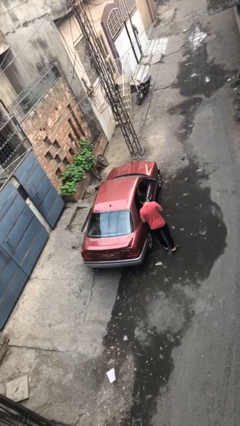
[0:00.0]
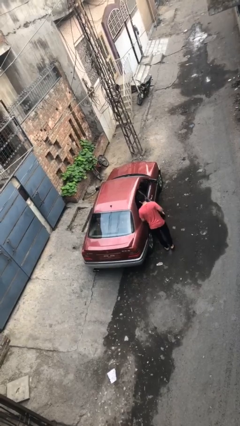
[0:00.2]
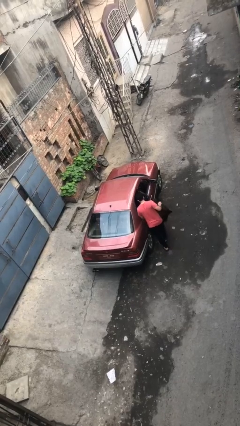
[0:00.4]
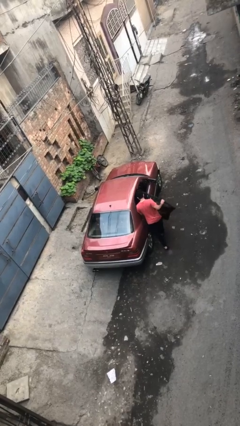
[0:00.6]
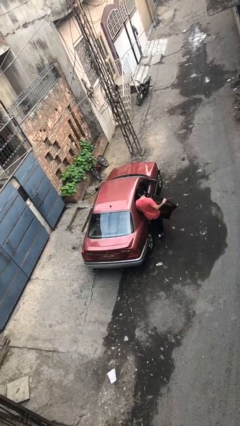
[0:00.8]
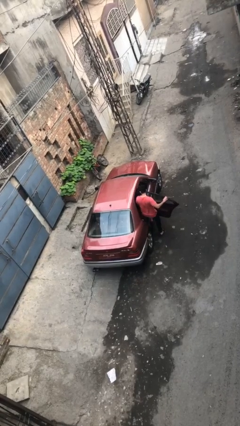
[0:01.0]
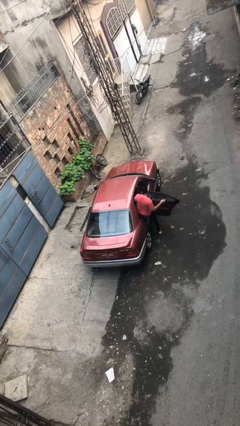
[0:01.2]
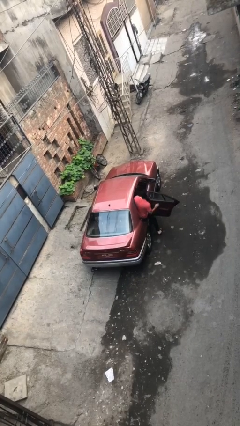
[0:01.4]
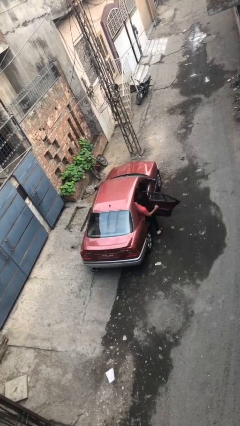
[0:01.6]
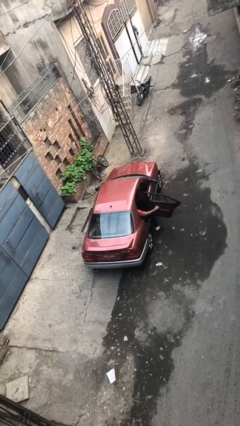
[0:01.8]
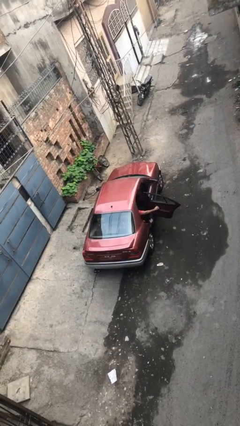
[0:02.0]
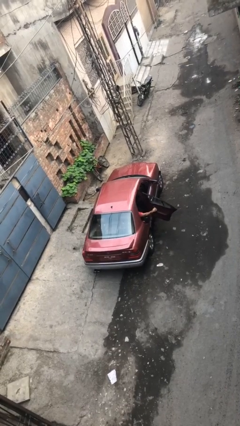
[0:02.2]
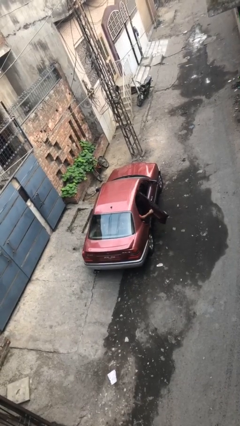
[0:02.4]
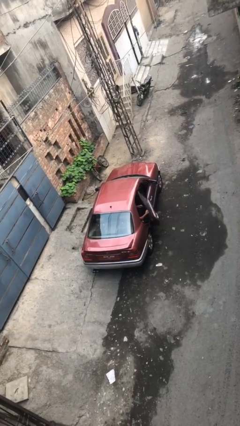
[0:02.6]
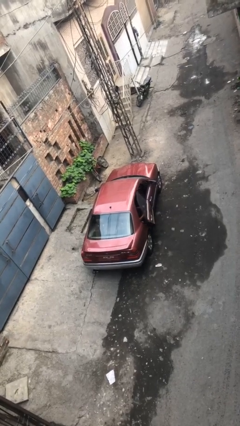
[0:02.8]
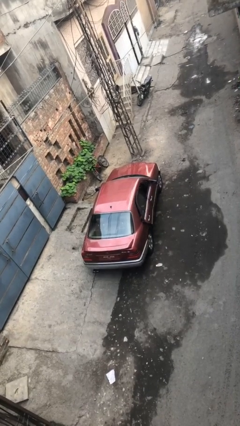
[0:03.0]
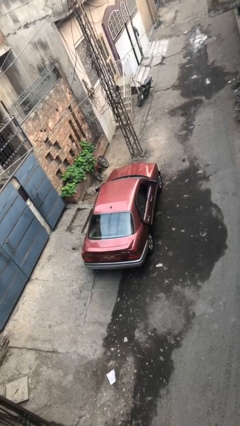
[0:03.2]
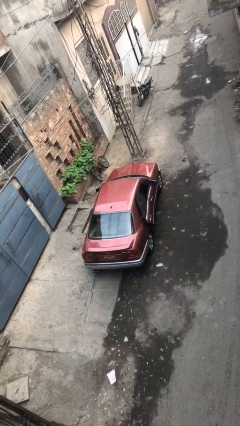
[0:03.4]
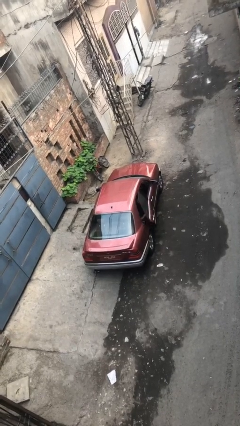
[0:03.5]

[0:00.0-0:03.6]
car picks up person

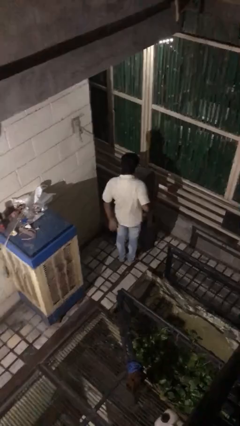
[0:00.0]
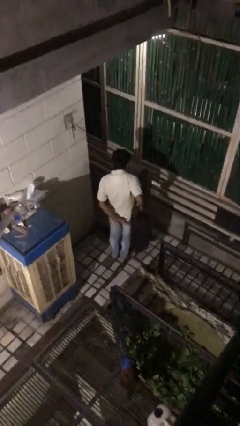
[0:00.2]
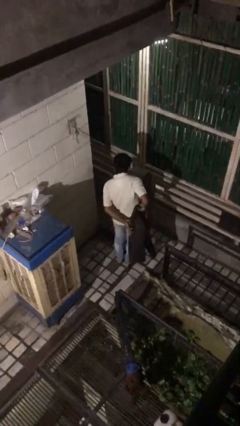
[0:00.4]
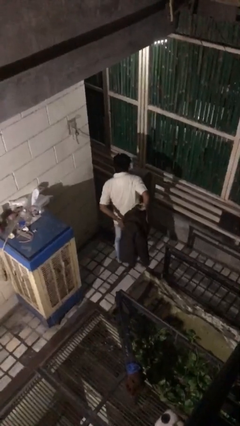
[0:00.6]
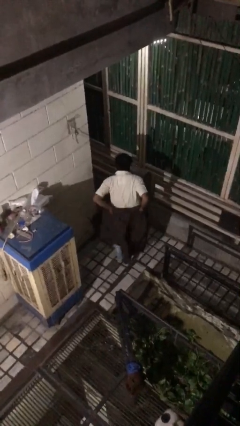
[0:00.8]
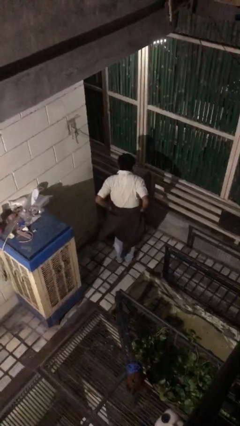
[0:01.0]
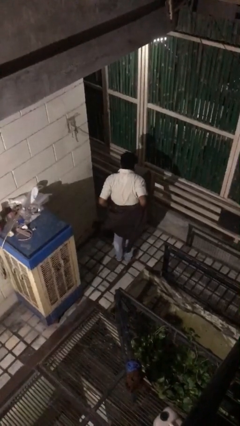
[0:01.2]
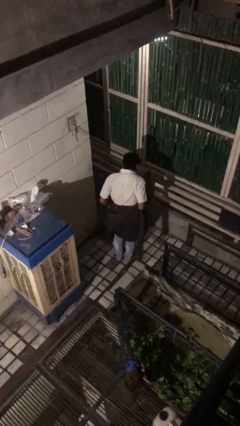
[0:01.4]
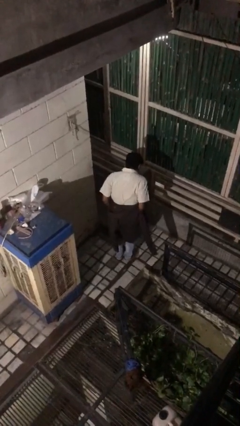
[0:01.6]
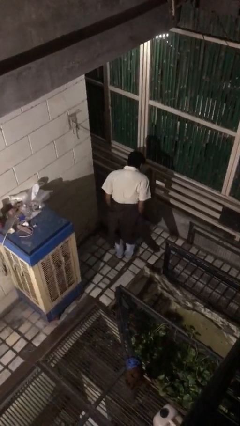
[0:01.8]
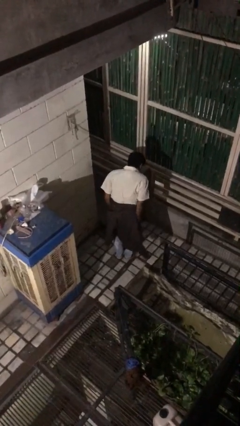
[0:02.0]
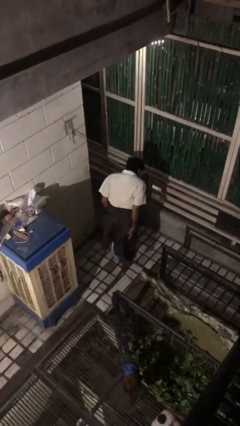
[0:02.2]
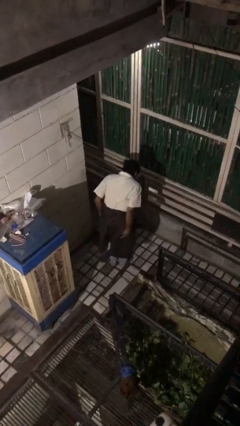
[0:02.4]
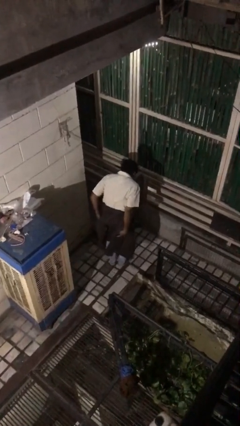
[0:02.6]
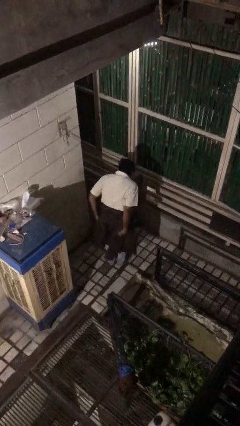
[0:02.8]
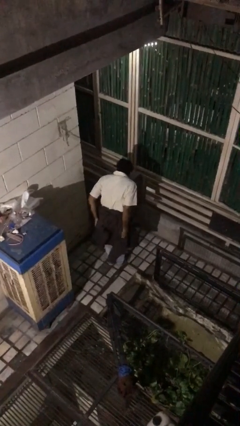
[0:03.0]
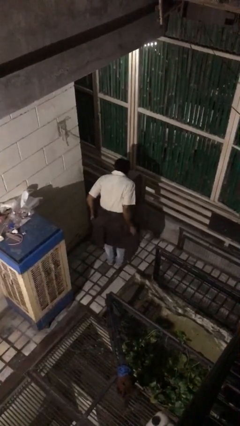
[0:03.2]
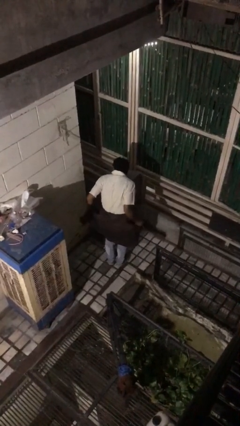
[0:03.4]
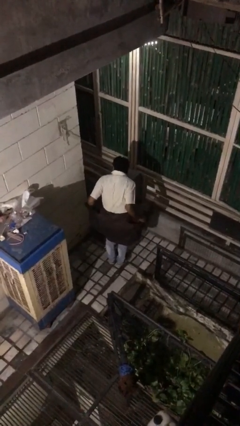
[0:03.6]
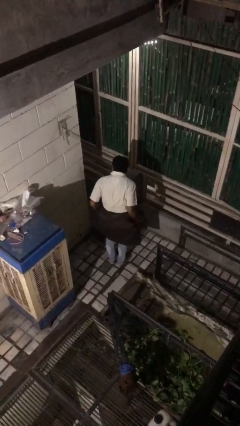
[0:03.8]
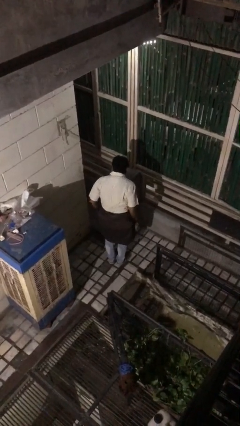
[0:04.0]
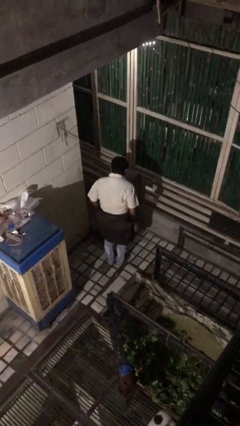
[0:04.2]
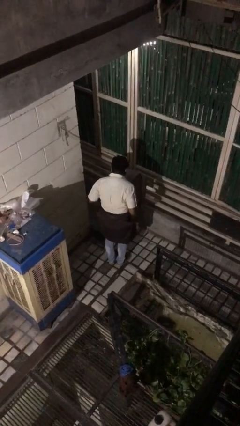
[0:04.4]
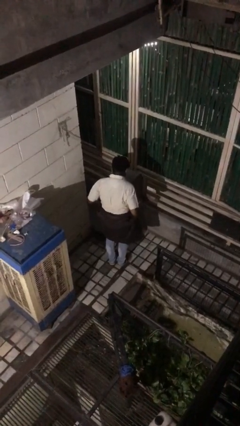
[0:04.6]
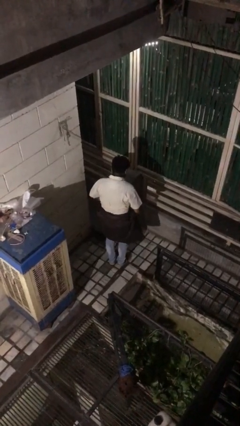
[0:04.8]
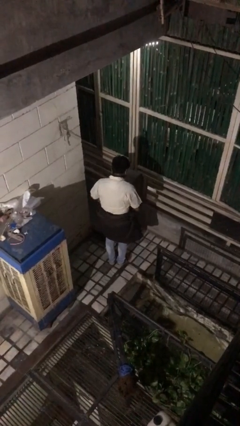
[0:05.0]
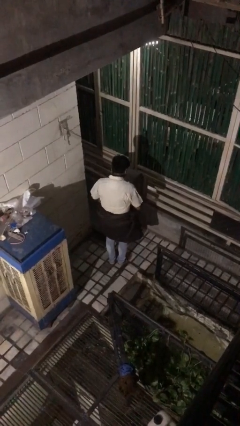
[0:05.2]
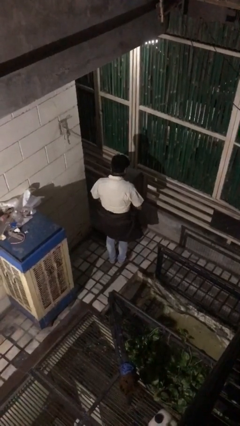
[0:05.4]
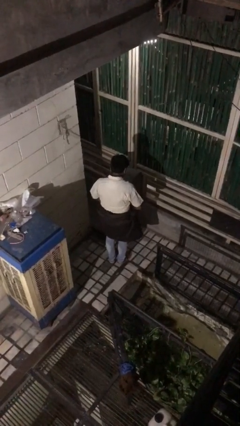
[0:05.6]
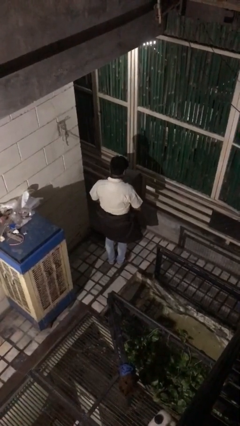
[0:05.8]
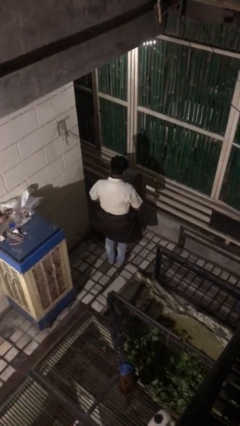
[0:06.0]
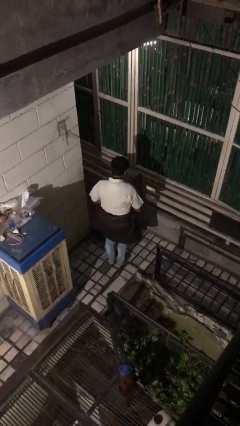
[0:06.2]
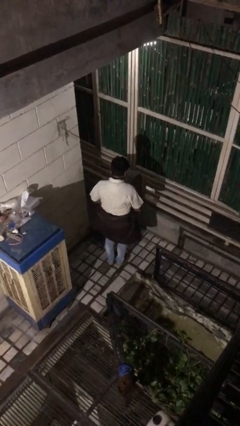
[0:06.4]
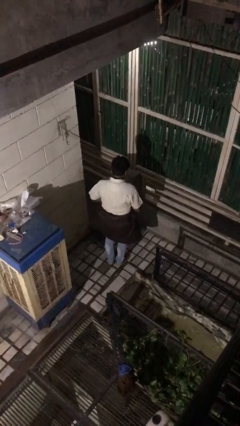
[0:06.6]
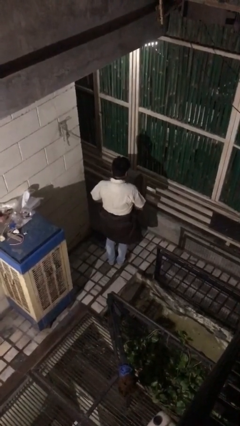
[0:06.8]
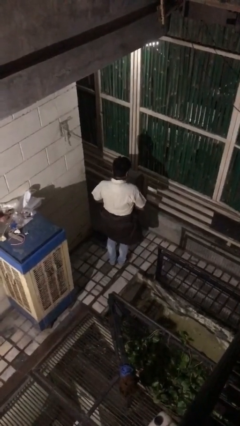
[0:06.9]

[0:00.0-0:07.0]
person ties jacket around waist

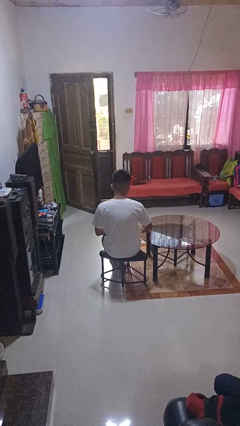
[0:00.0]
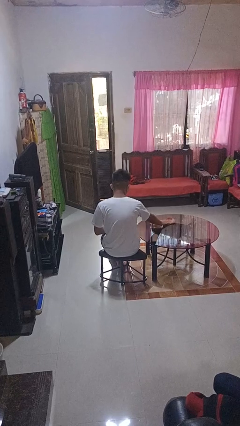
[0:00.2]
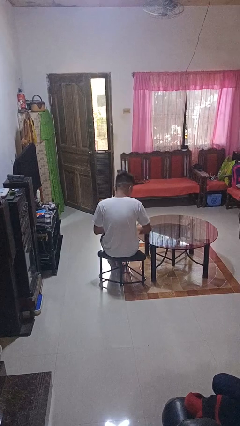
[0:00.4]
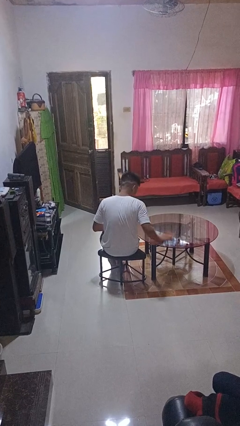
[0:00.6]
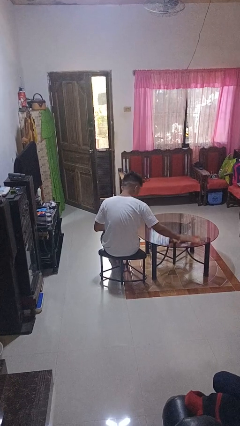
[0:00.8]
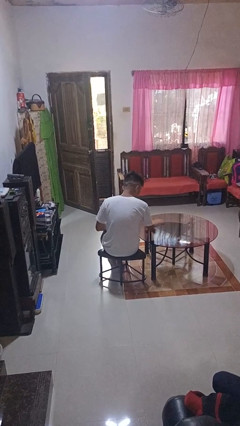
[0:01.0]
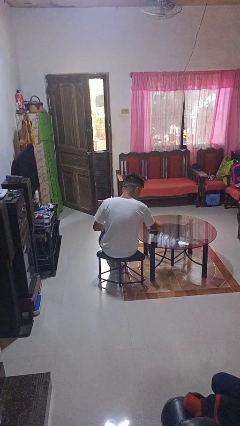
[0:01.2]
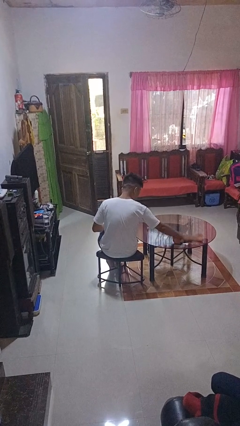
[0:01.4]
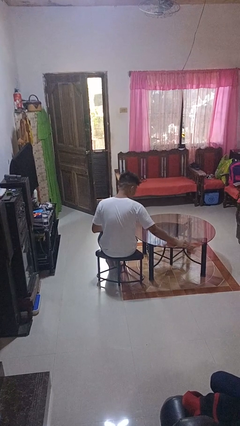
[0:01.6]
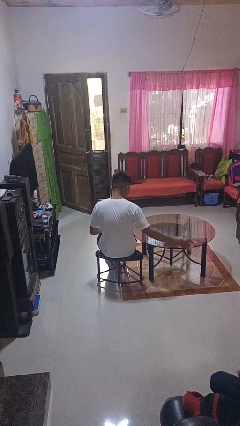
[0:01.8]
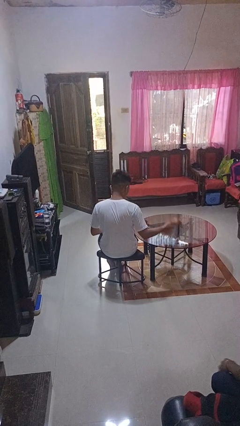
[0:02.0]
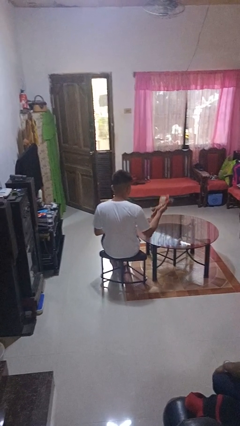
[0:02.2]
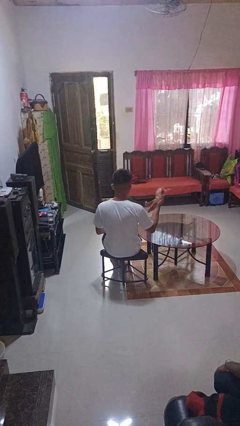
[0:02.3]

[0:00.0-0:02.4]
person cleans table with rag

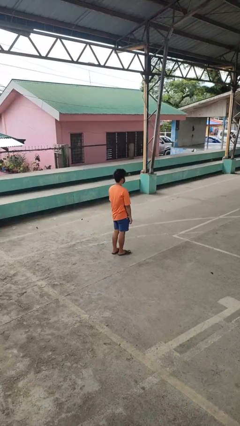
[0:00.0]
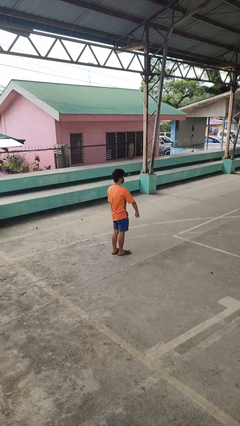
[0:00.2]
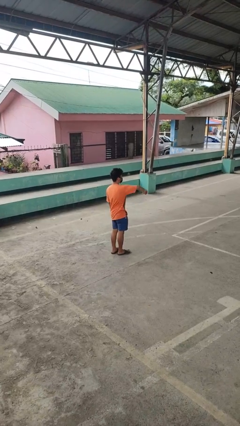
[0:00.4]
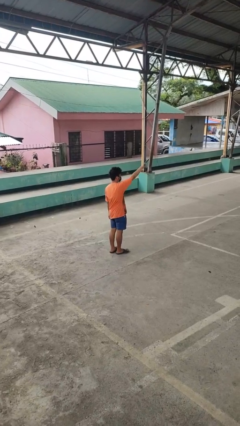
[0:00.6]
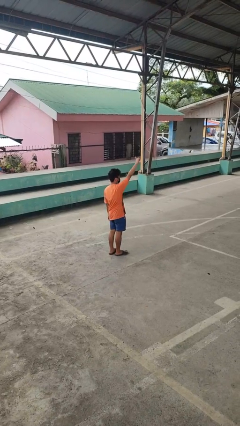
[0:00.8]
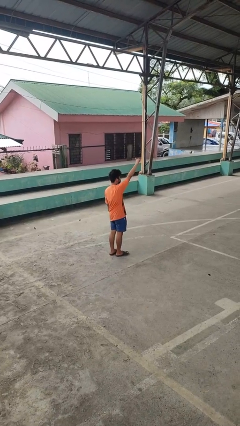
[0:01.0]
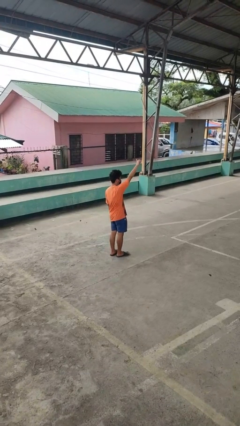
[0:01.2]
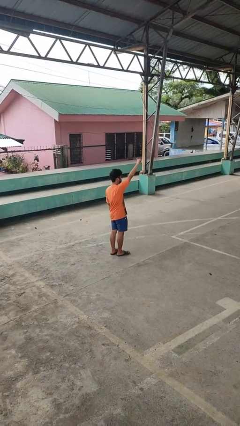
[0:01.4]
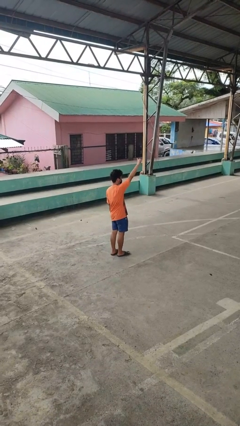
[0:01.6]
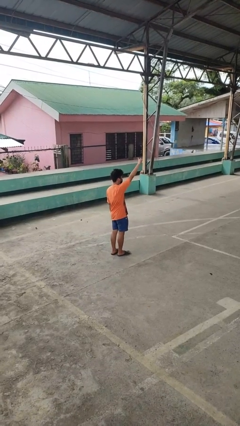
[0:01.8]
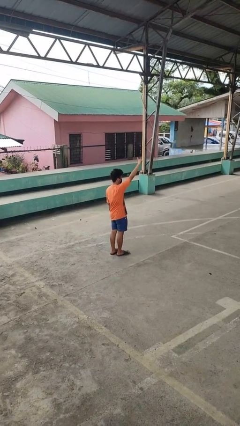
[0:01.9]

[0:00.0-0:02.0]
person gestures swipe up

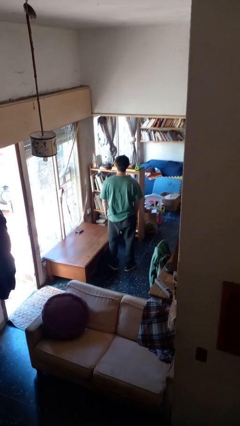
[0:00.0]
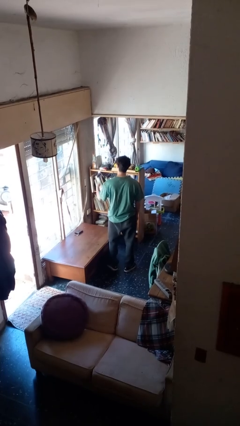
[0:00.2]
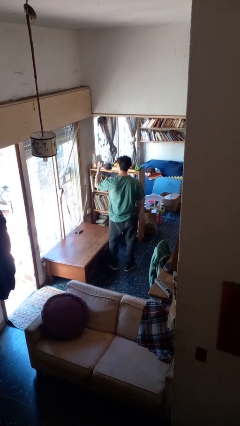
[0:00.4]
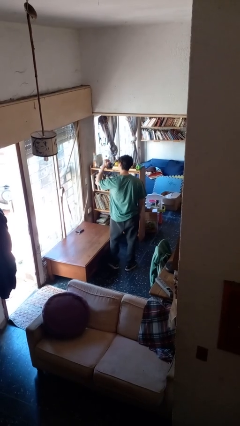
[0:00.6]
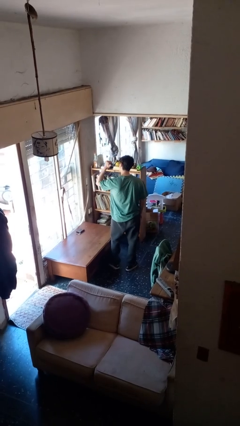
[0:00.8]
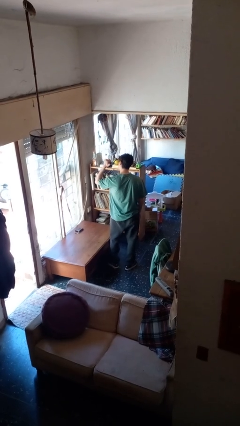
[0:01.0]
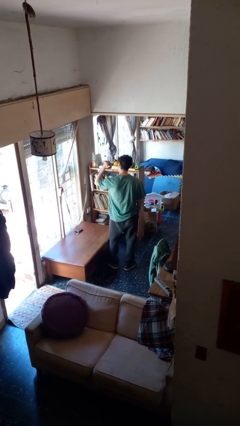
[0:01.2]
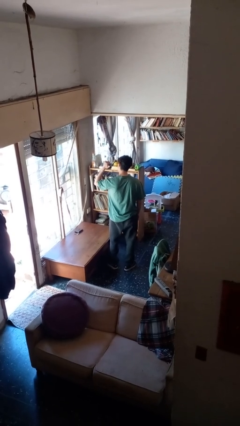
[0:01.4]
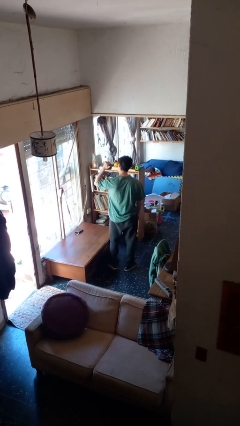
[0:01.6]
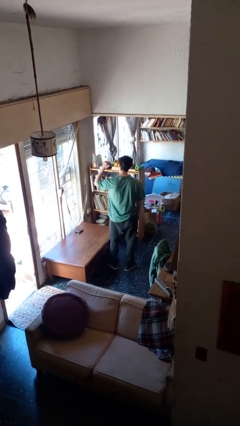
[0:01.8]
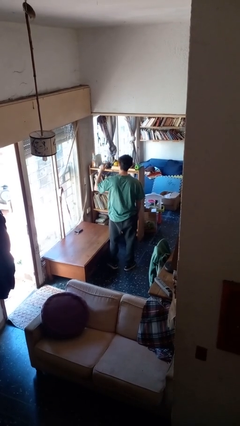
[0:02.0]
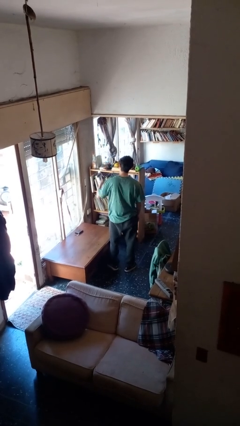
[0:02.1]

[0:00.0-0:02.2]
person gestures behind me

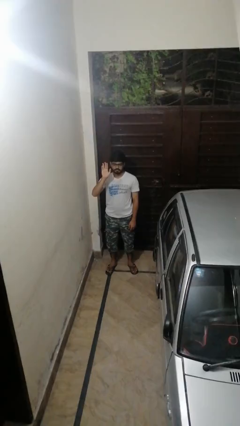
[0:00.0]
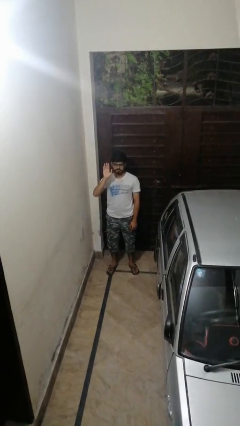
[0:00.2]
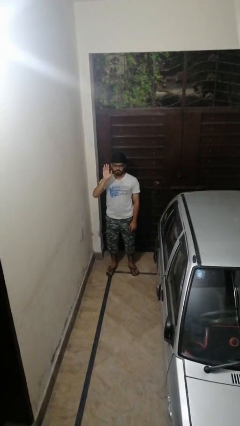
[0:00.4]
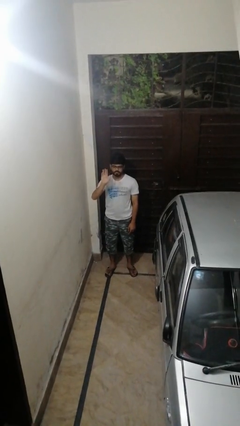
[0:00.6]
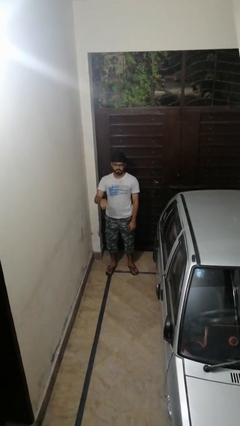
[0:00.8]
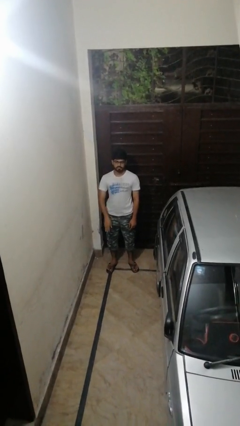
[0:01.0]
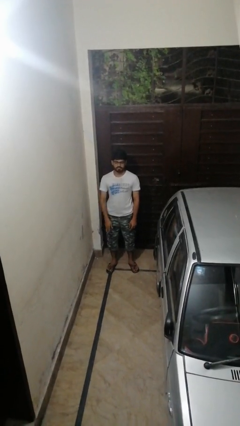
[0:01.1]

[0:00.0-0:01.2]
person gestures lower hand
